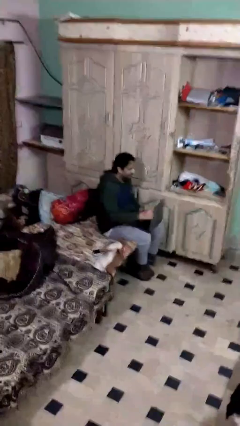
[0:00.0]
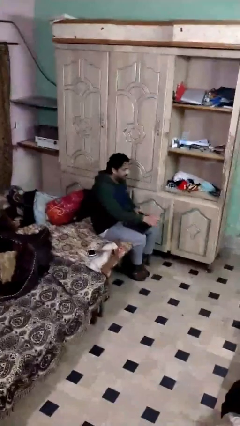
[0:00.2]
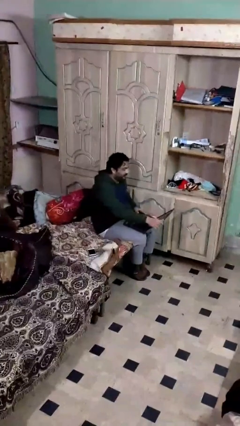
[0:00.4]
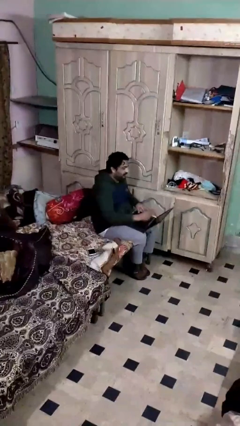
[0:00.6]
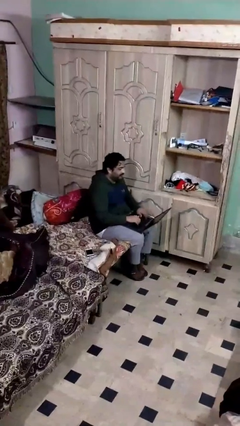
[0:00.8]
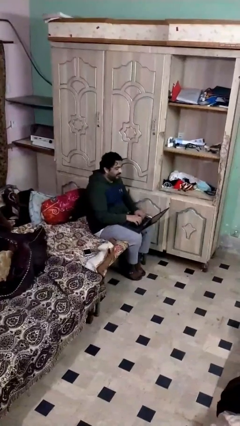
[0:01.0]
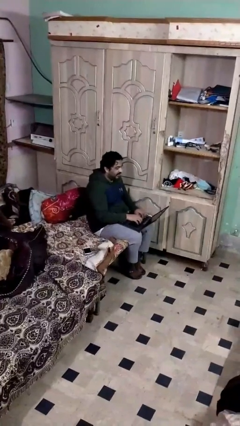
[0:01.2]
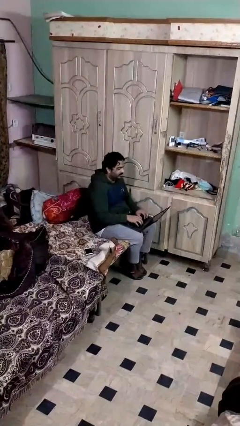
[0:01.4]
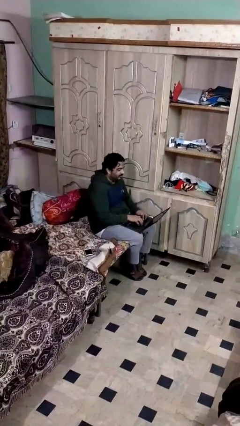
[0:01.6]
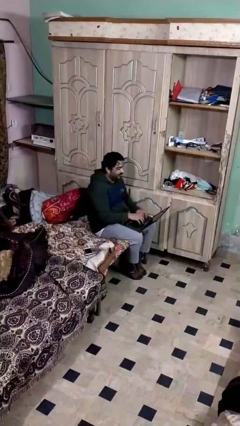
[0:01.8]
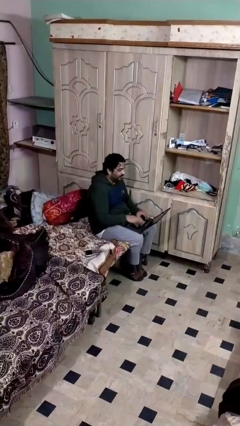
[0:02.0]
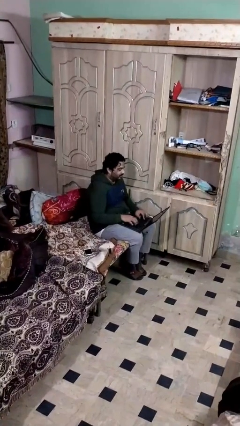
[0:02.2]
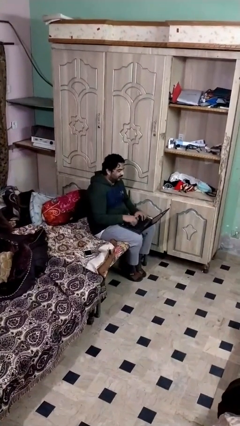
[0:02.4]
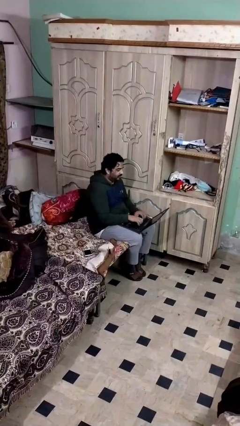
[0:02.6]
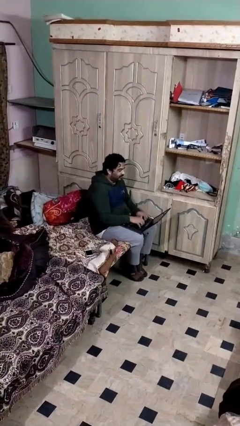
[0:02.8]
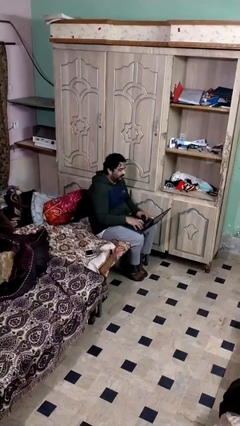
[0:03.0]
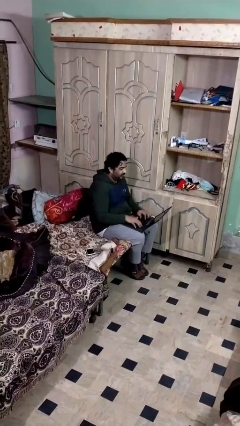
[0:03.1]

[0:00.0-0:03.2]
person interacts with laptop

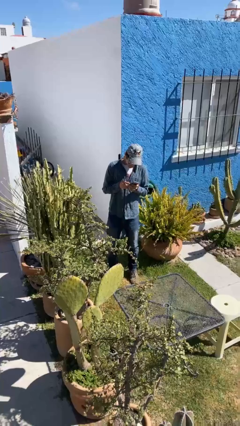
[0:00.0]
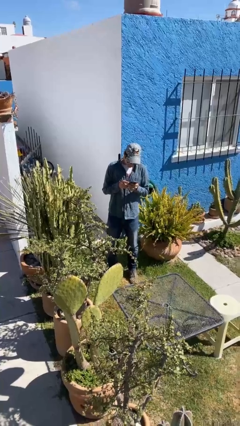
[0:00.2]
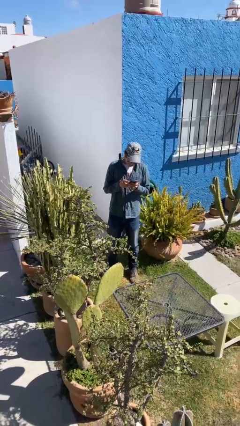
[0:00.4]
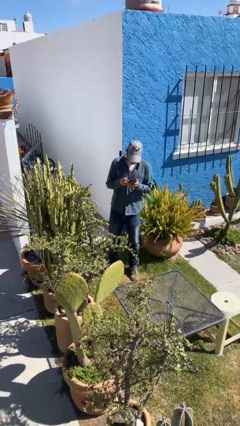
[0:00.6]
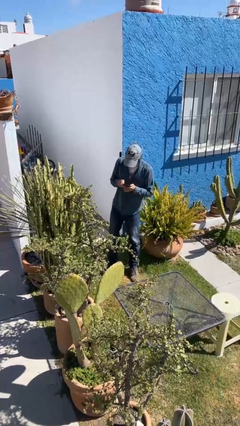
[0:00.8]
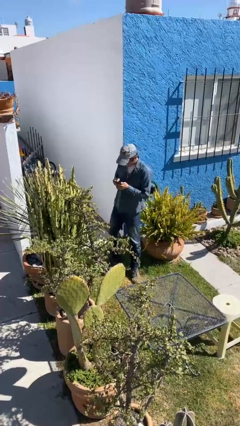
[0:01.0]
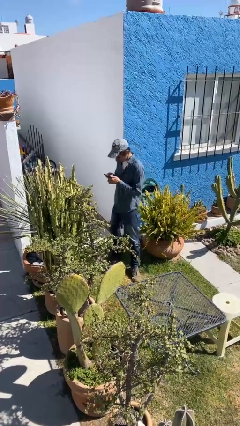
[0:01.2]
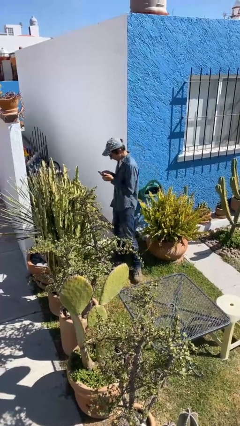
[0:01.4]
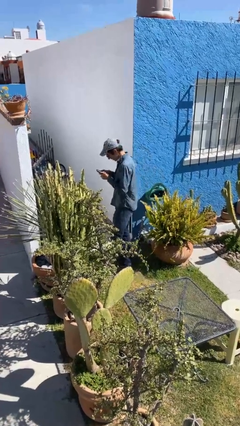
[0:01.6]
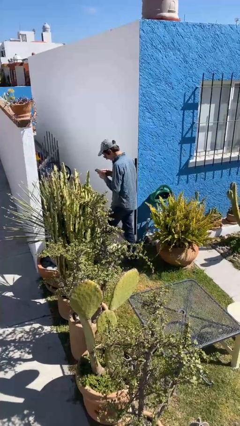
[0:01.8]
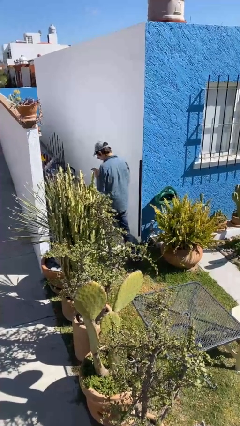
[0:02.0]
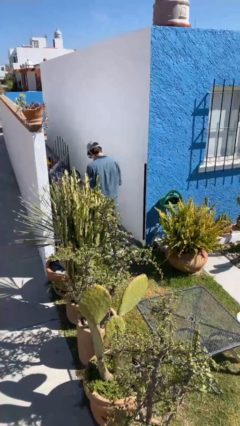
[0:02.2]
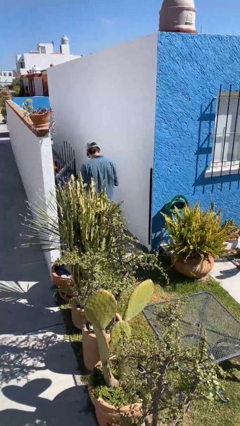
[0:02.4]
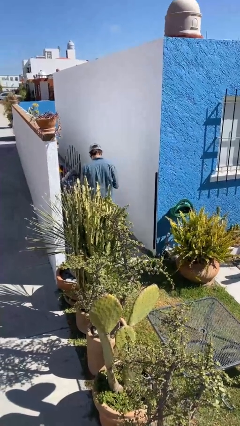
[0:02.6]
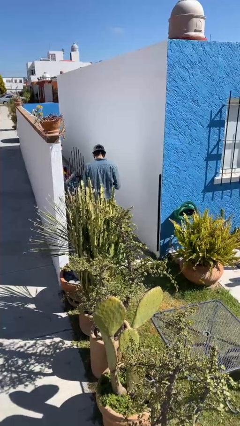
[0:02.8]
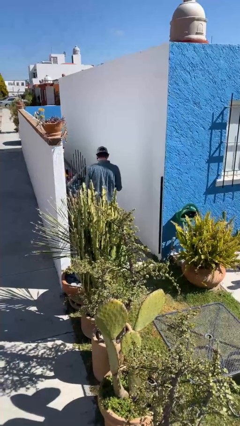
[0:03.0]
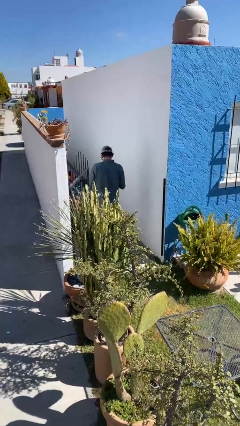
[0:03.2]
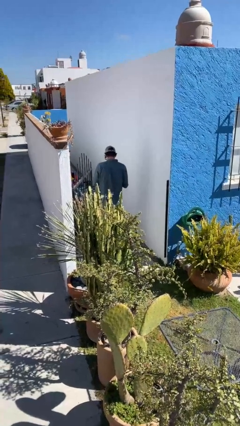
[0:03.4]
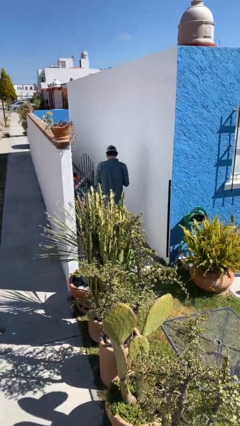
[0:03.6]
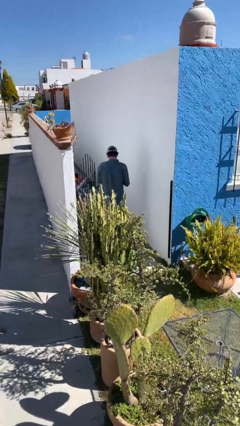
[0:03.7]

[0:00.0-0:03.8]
person exits scene through structure

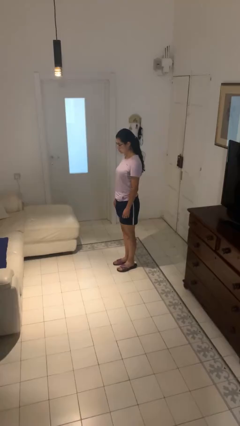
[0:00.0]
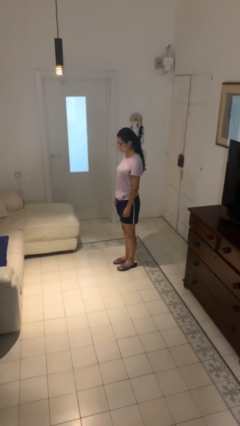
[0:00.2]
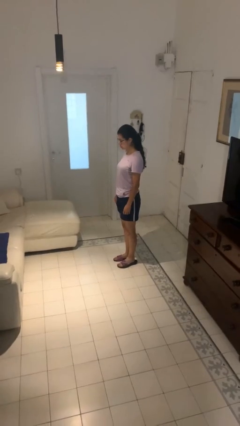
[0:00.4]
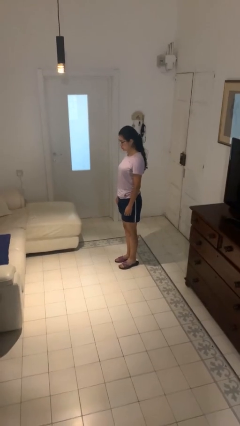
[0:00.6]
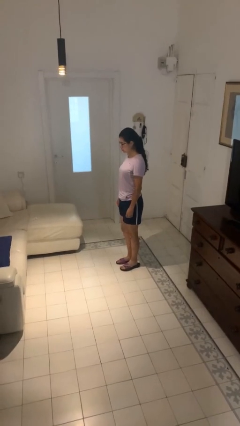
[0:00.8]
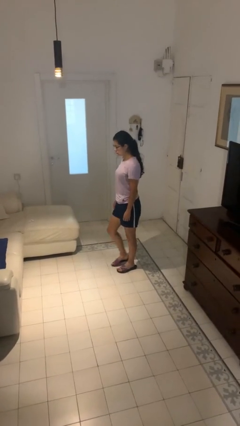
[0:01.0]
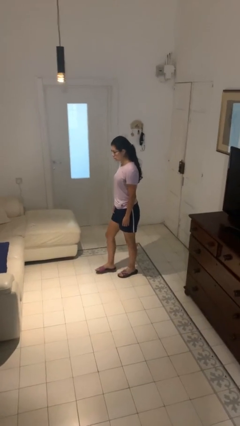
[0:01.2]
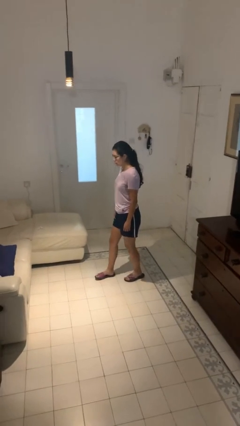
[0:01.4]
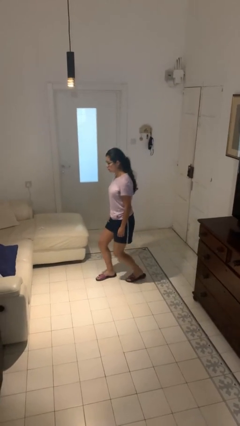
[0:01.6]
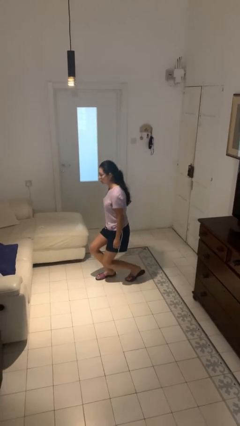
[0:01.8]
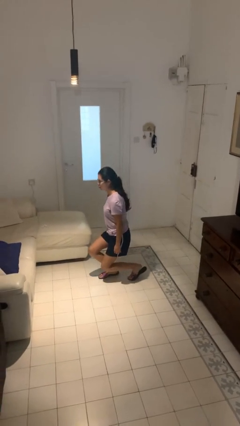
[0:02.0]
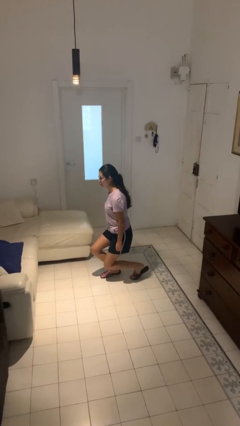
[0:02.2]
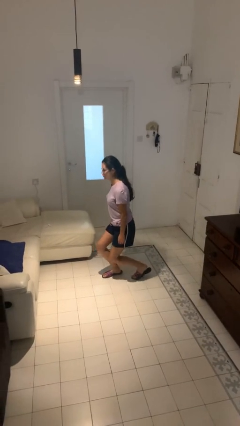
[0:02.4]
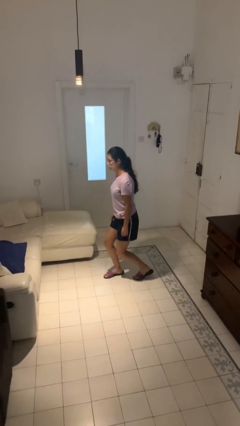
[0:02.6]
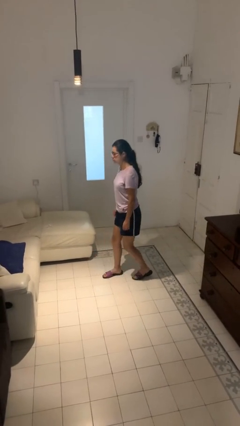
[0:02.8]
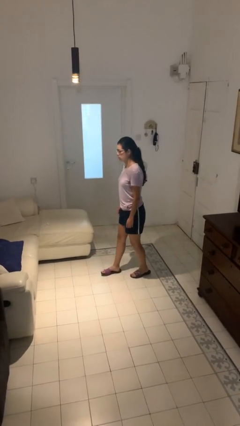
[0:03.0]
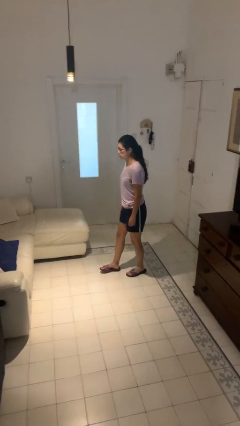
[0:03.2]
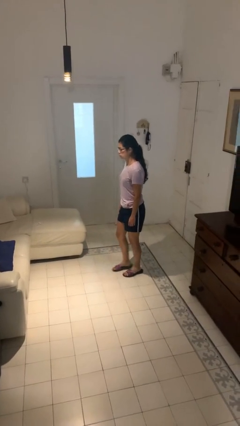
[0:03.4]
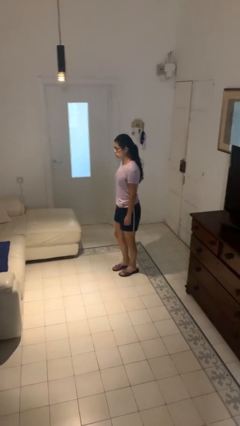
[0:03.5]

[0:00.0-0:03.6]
person exercises with lunges

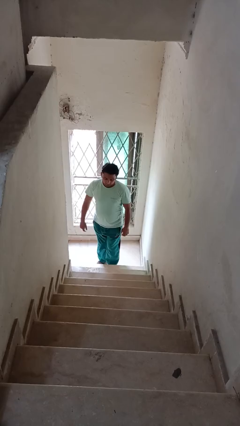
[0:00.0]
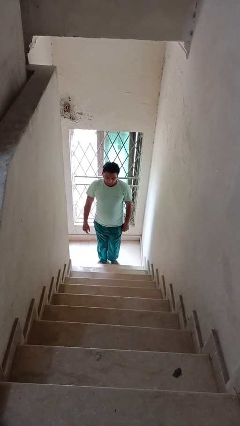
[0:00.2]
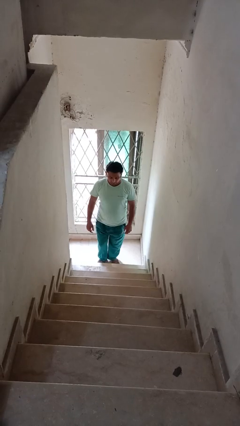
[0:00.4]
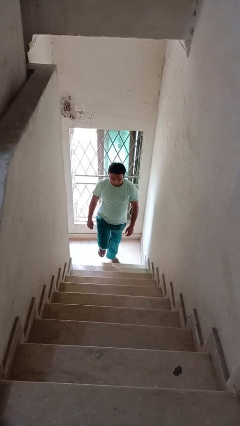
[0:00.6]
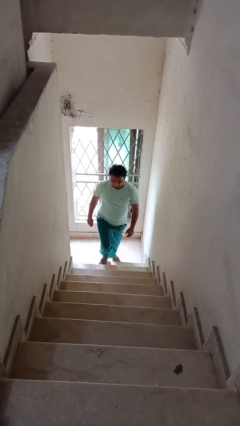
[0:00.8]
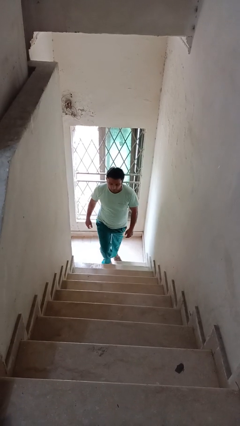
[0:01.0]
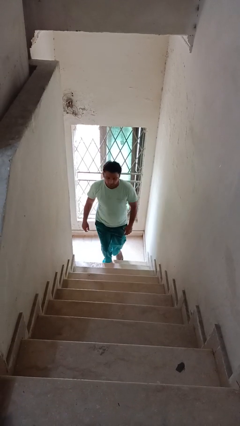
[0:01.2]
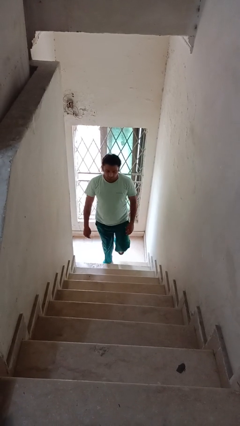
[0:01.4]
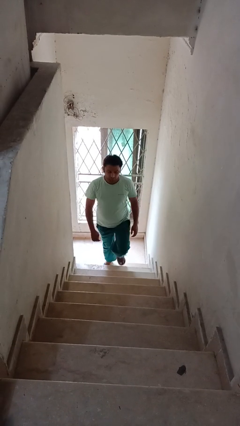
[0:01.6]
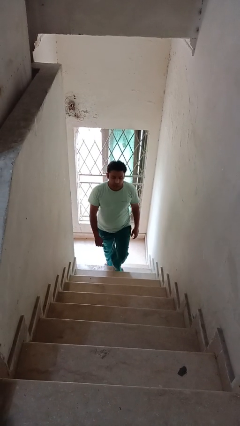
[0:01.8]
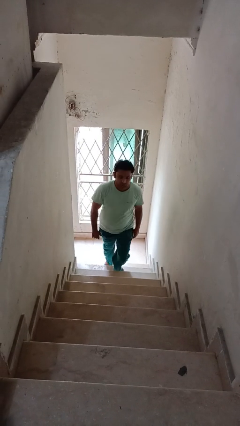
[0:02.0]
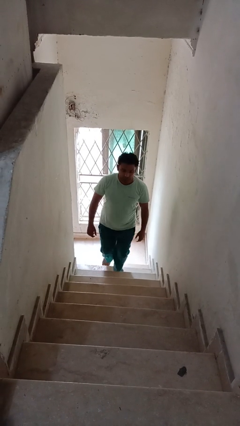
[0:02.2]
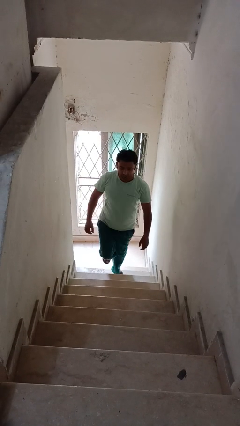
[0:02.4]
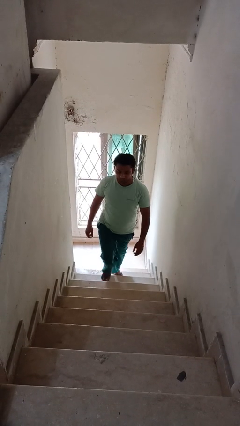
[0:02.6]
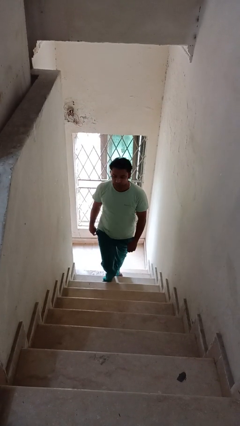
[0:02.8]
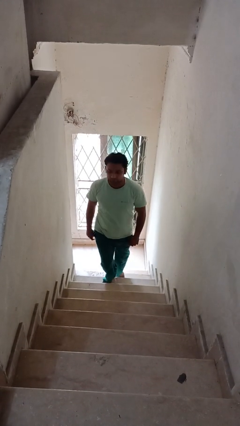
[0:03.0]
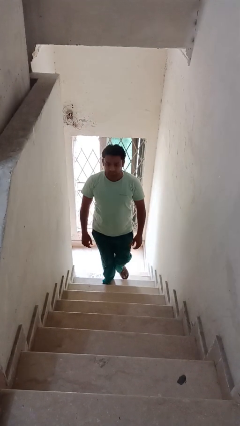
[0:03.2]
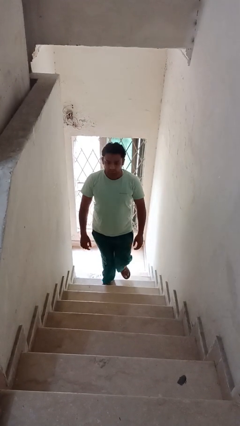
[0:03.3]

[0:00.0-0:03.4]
person climbs up stairs

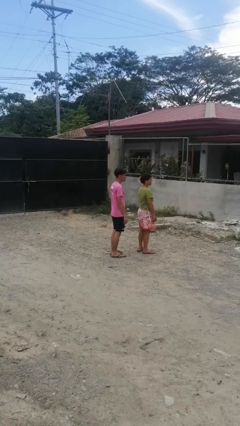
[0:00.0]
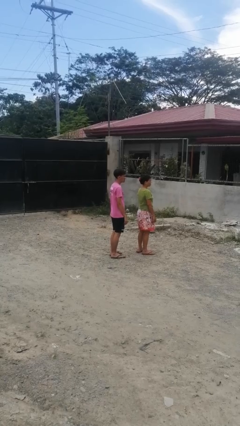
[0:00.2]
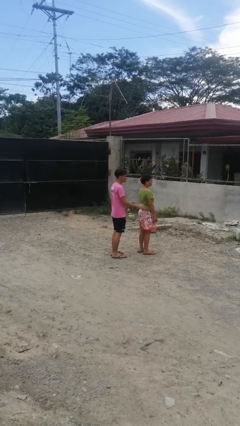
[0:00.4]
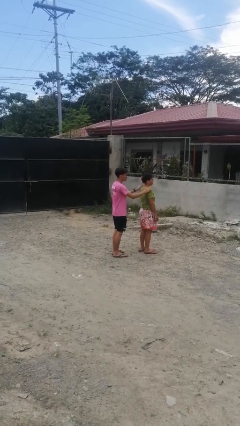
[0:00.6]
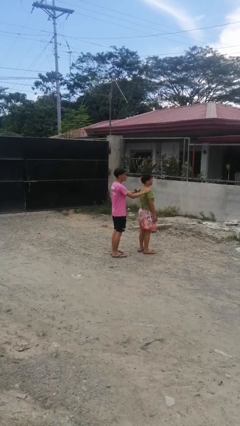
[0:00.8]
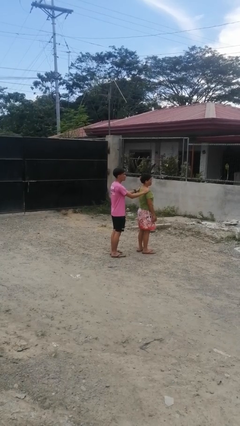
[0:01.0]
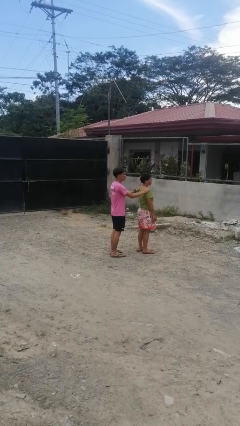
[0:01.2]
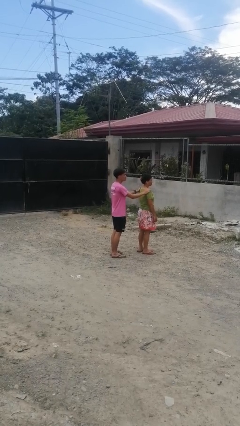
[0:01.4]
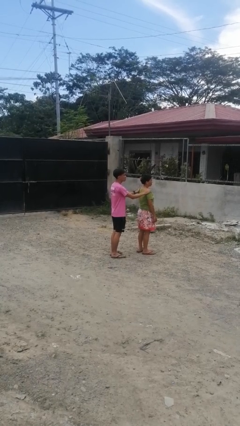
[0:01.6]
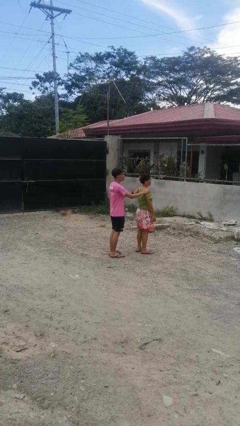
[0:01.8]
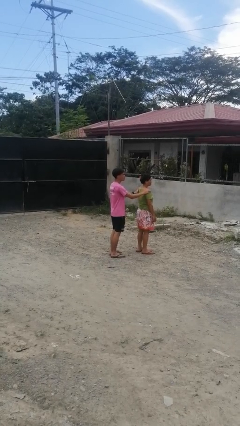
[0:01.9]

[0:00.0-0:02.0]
person grabs person by shoulder

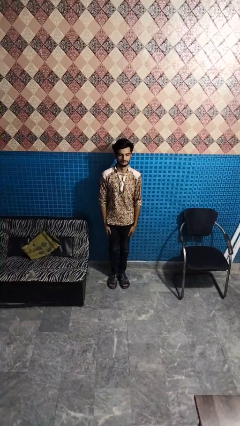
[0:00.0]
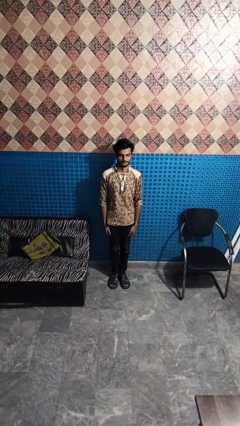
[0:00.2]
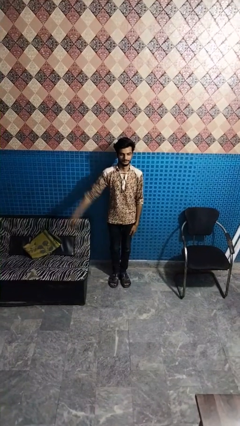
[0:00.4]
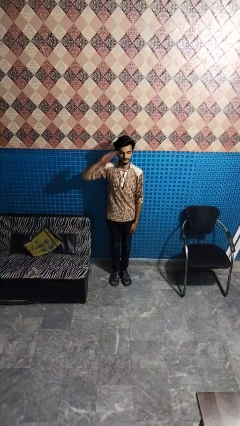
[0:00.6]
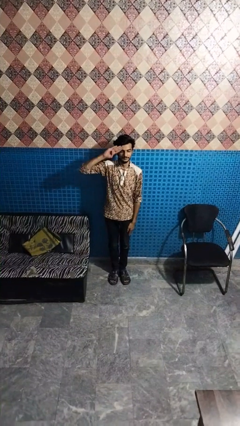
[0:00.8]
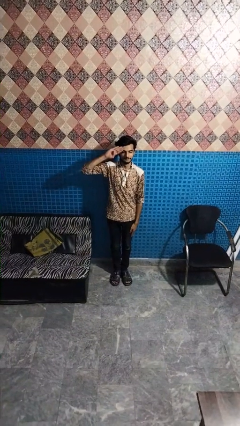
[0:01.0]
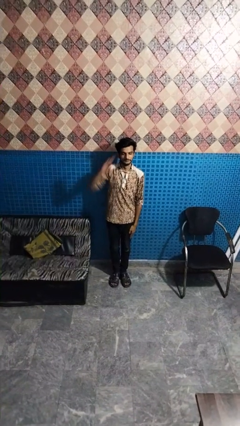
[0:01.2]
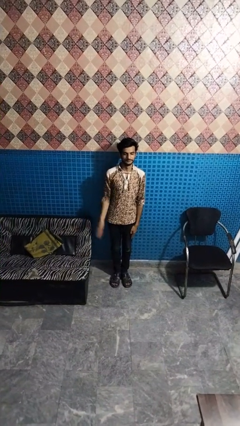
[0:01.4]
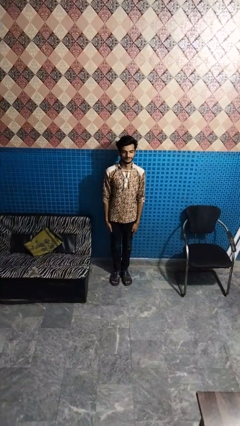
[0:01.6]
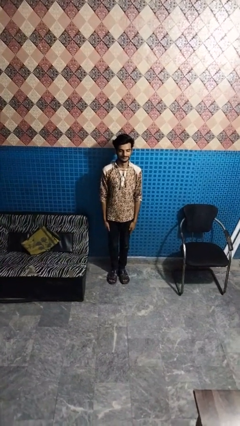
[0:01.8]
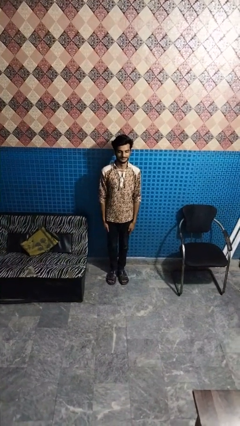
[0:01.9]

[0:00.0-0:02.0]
person salutes
